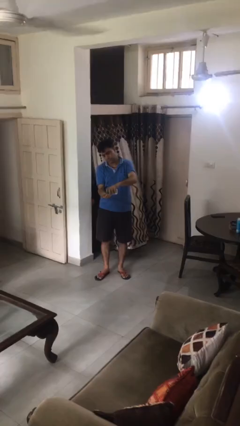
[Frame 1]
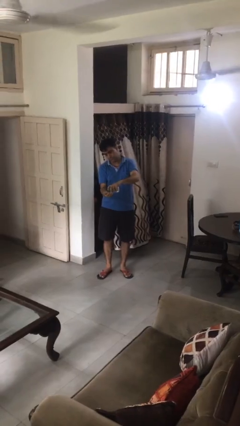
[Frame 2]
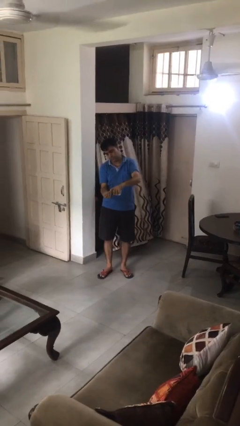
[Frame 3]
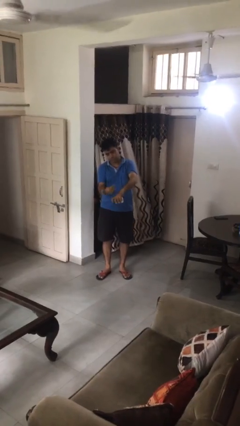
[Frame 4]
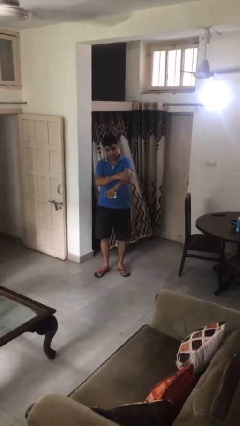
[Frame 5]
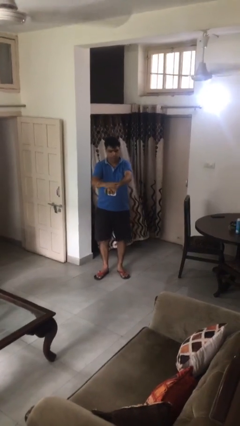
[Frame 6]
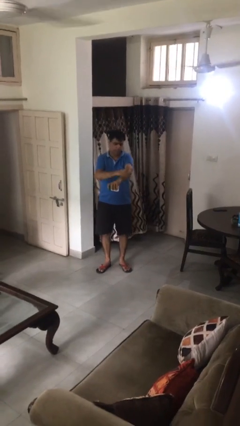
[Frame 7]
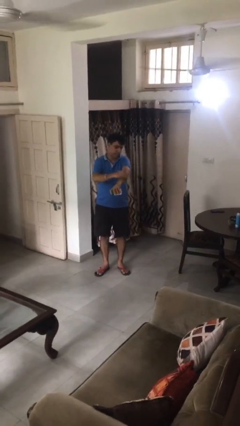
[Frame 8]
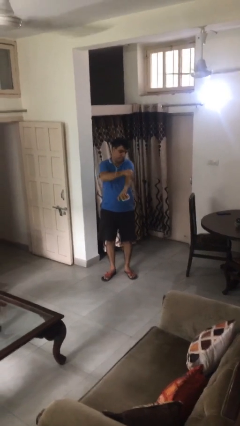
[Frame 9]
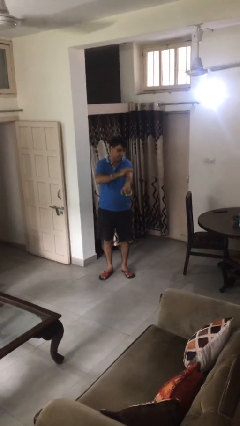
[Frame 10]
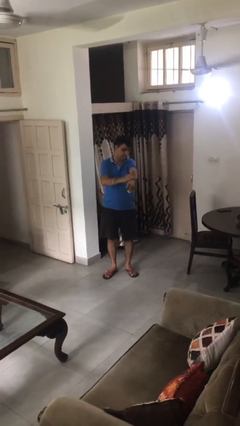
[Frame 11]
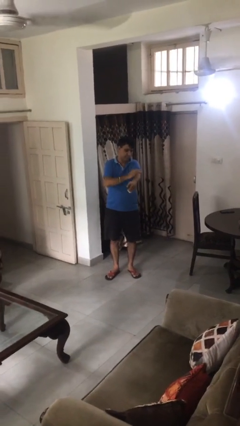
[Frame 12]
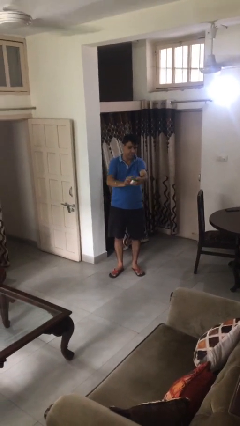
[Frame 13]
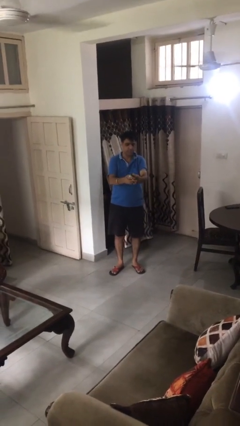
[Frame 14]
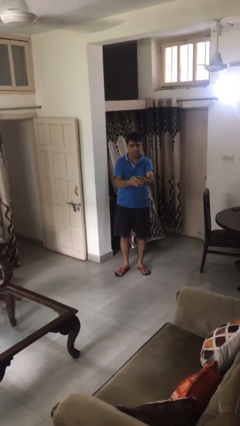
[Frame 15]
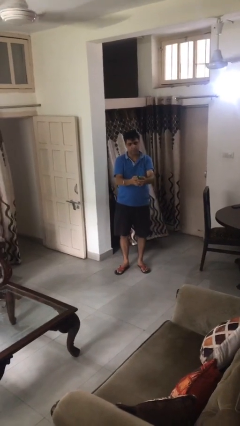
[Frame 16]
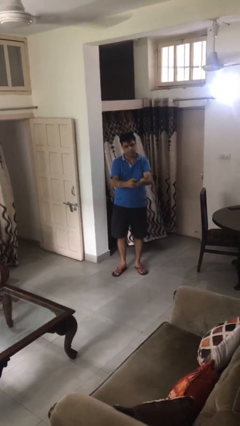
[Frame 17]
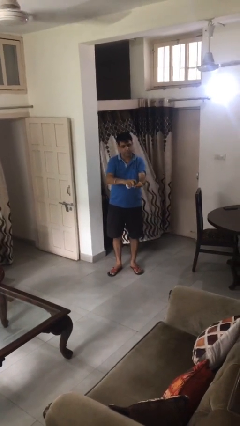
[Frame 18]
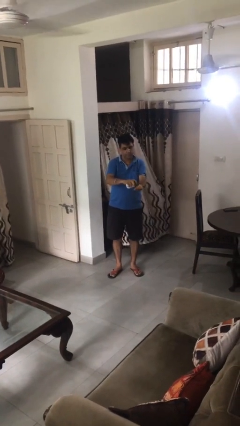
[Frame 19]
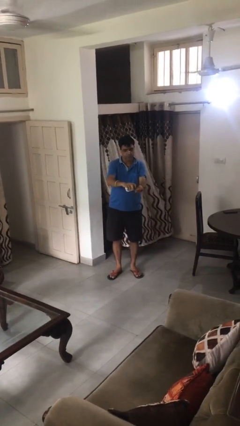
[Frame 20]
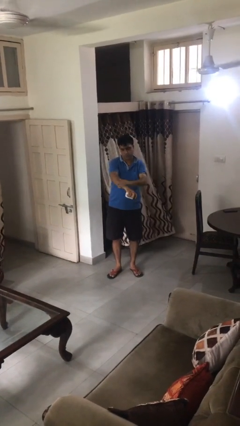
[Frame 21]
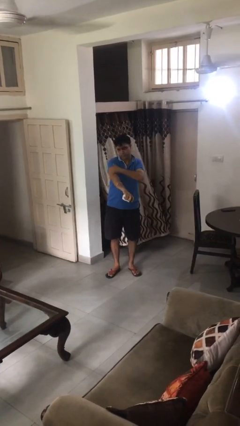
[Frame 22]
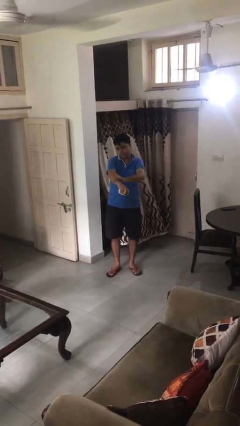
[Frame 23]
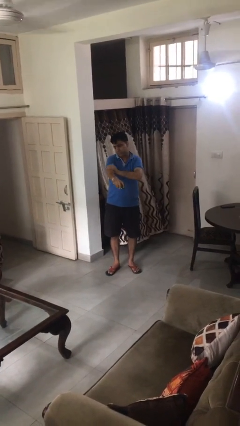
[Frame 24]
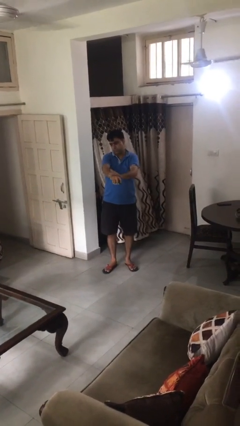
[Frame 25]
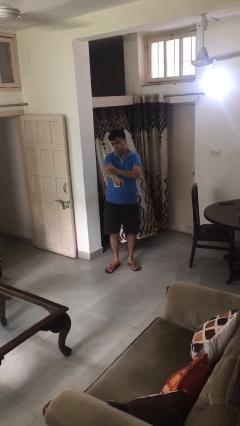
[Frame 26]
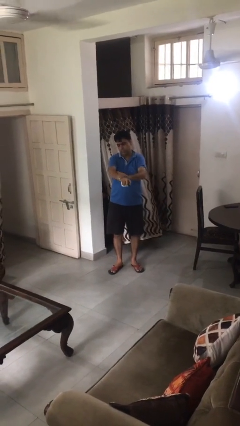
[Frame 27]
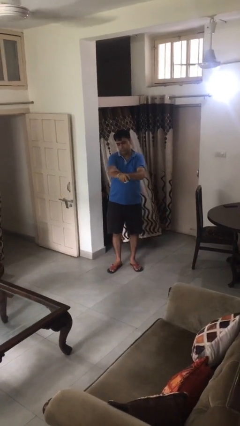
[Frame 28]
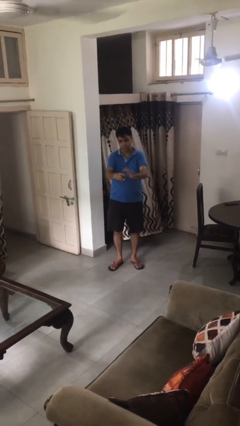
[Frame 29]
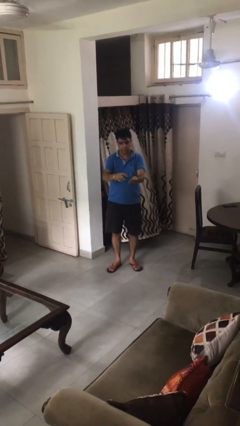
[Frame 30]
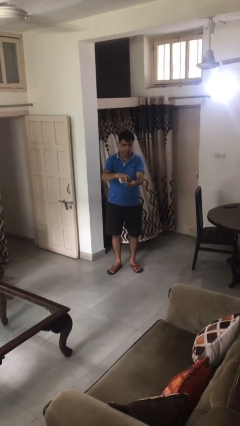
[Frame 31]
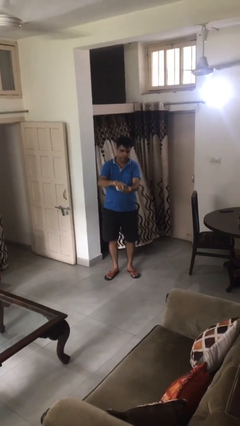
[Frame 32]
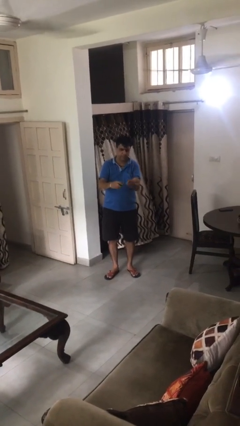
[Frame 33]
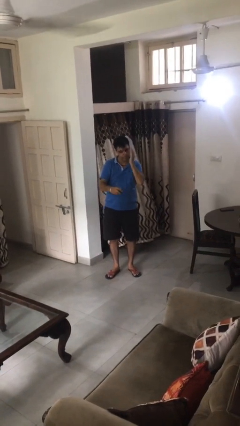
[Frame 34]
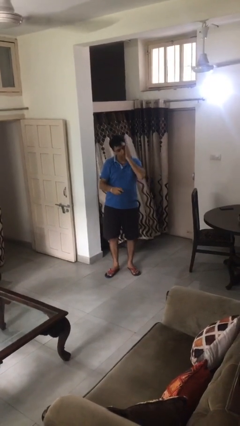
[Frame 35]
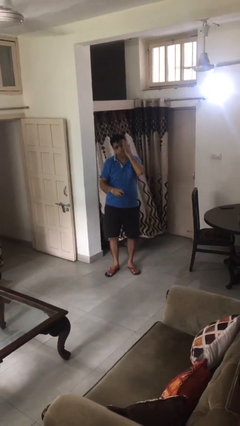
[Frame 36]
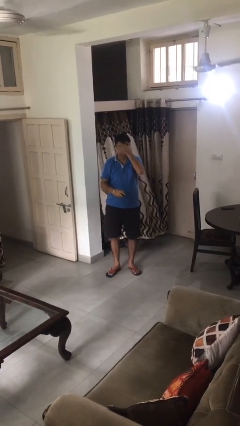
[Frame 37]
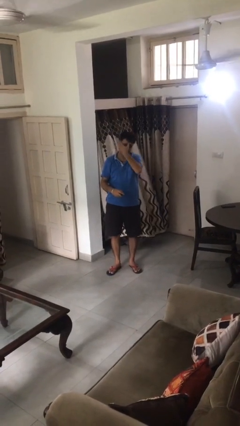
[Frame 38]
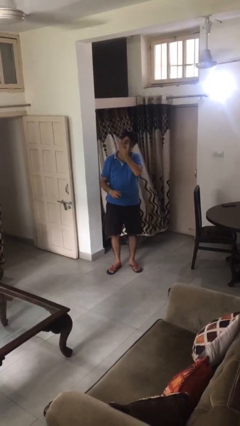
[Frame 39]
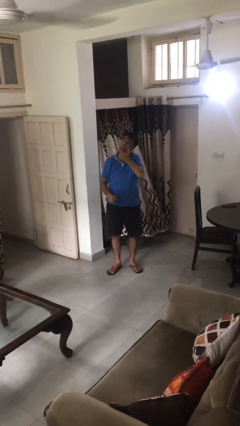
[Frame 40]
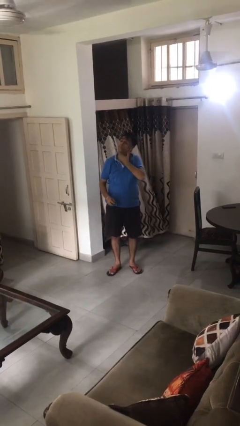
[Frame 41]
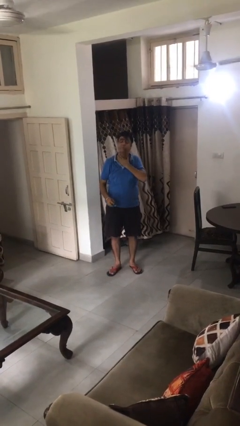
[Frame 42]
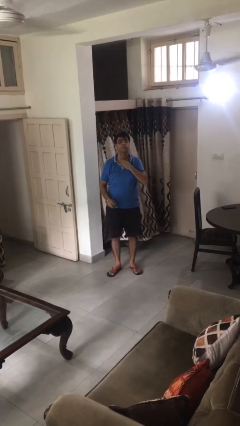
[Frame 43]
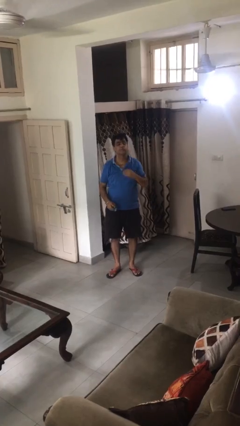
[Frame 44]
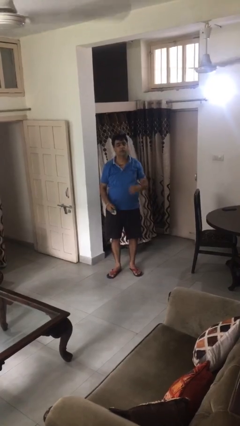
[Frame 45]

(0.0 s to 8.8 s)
person applies sunscreen

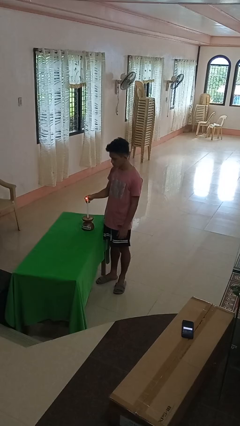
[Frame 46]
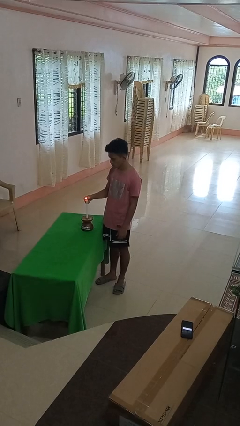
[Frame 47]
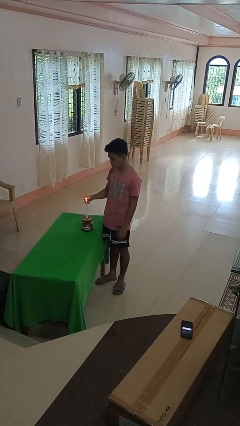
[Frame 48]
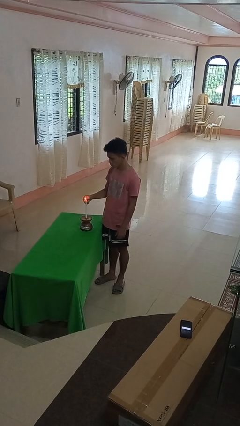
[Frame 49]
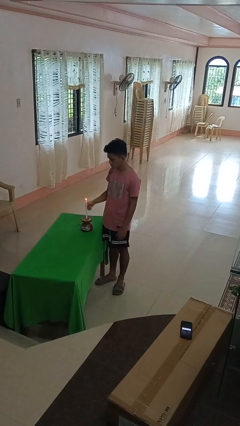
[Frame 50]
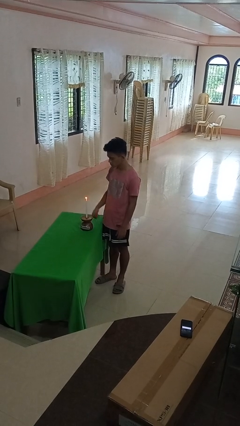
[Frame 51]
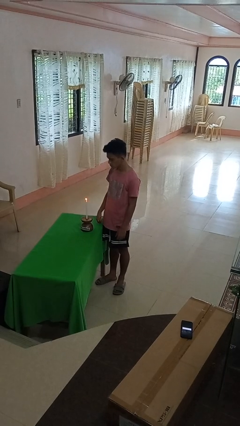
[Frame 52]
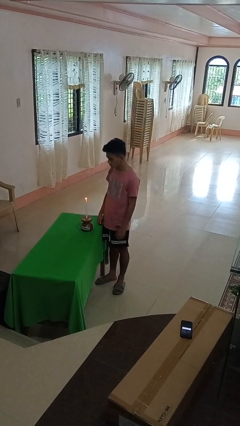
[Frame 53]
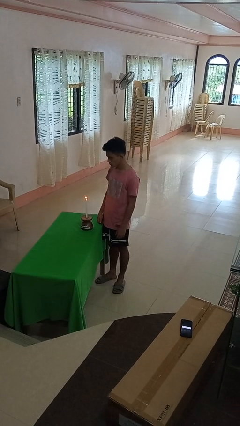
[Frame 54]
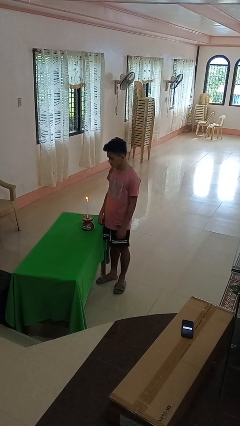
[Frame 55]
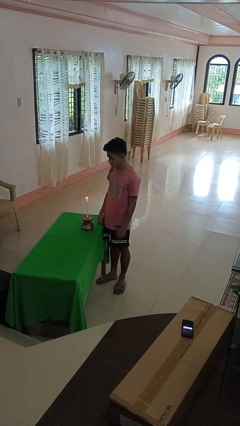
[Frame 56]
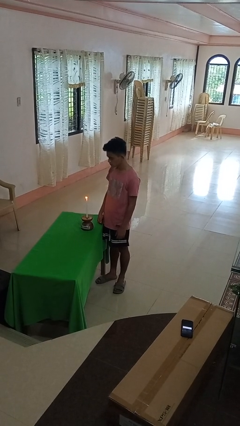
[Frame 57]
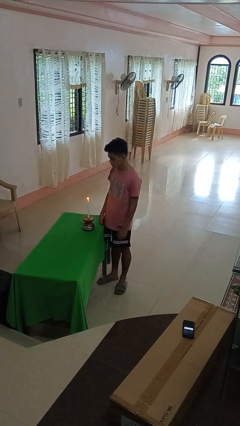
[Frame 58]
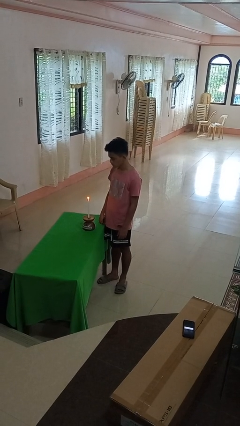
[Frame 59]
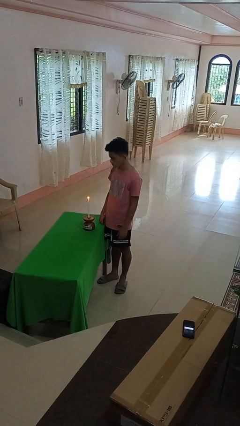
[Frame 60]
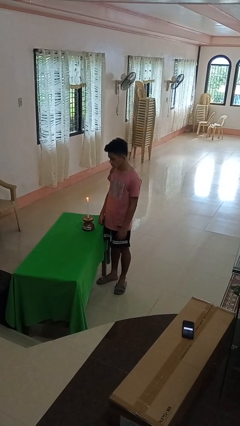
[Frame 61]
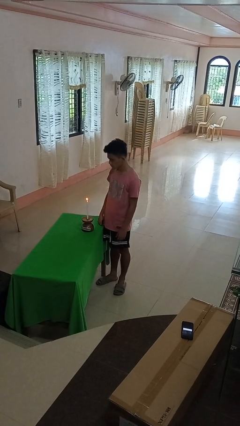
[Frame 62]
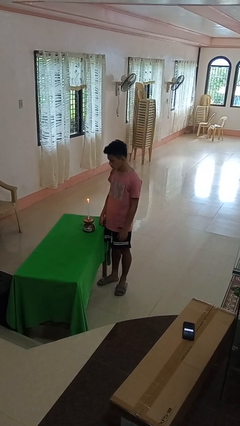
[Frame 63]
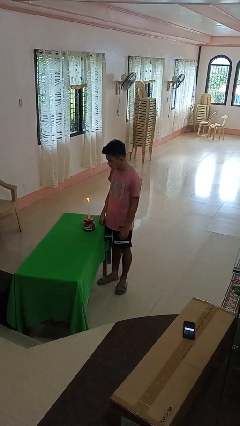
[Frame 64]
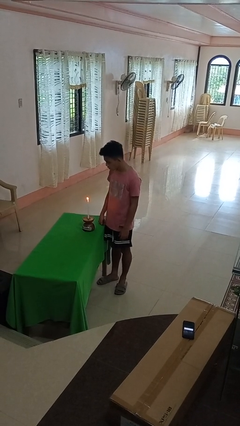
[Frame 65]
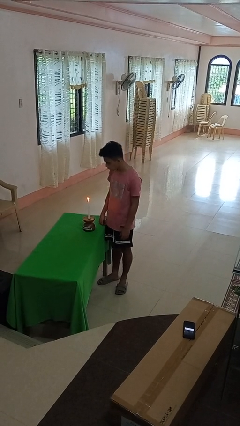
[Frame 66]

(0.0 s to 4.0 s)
person lights candle

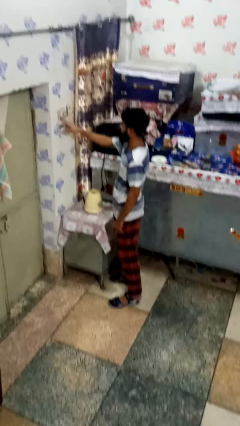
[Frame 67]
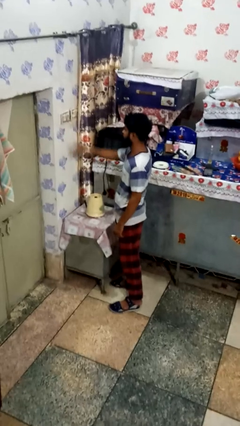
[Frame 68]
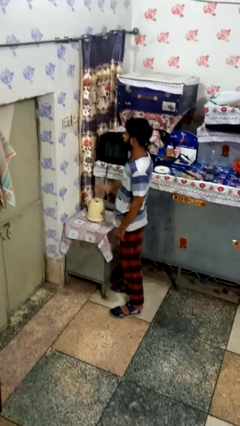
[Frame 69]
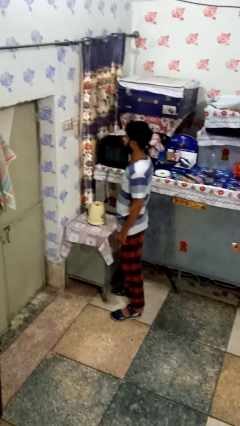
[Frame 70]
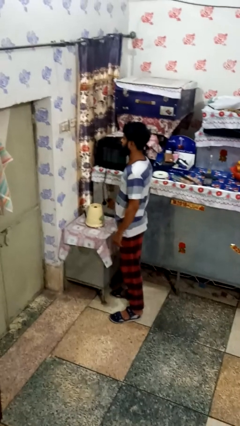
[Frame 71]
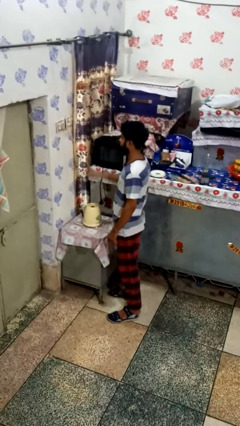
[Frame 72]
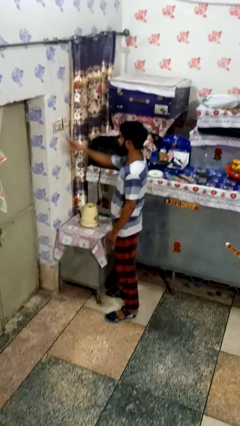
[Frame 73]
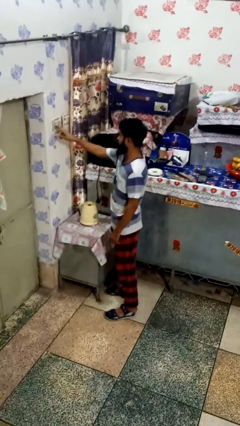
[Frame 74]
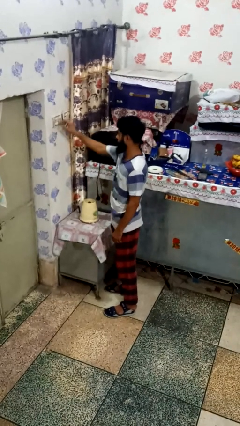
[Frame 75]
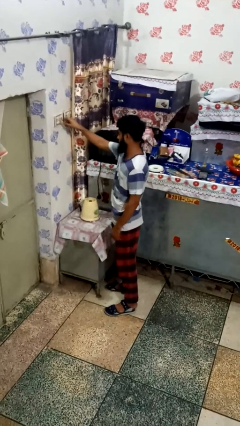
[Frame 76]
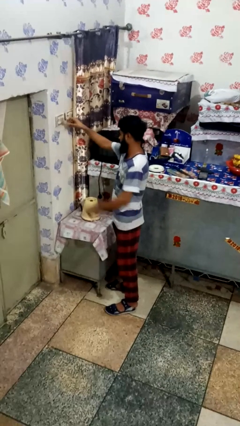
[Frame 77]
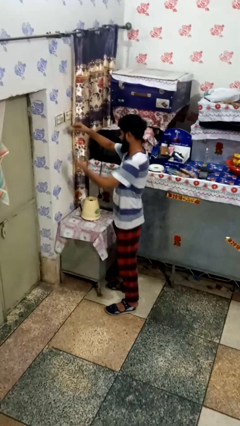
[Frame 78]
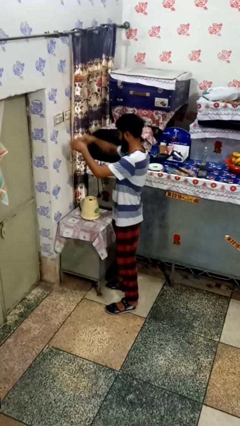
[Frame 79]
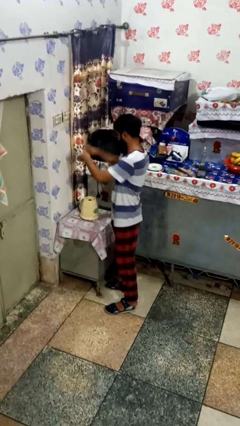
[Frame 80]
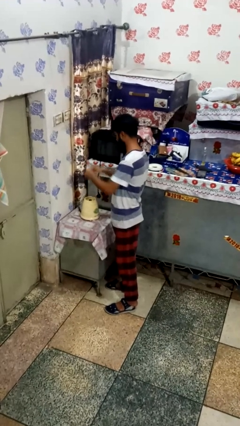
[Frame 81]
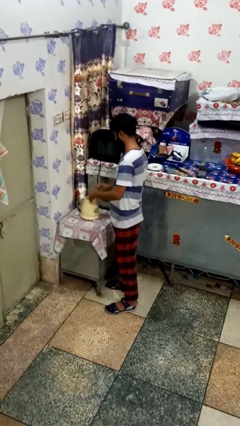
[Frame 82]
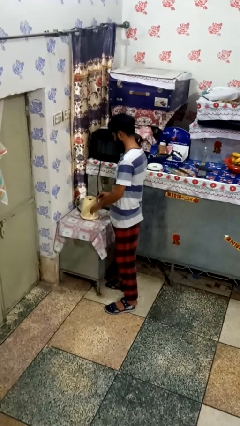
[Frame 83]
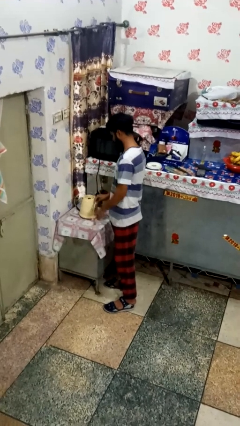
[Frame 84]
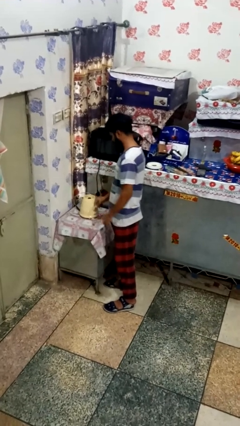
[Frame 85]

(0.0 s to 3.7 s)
person unplugs from electrical socket

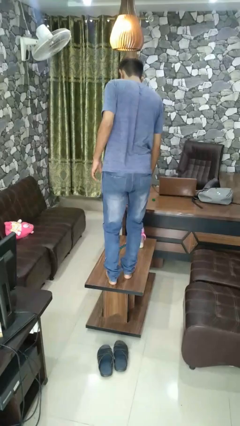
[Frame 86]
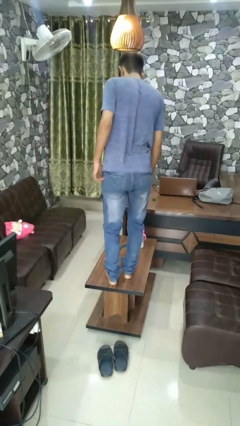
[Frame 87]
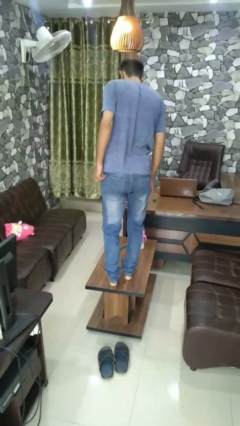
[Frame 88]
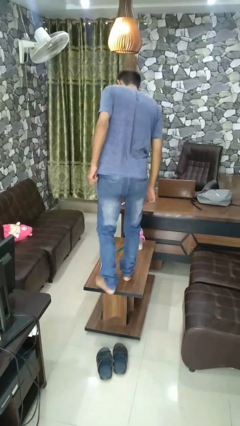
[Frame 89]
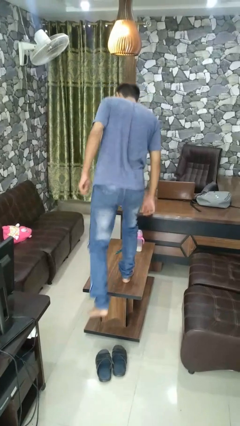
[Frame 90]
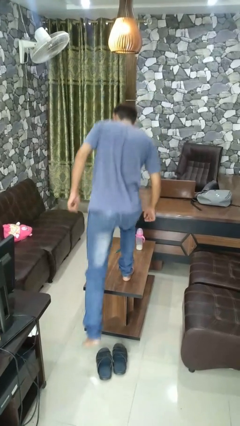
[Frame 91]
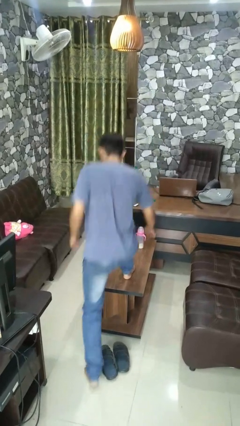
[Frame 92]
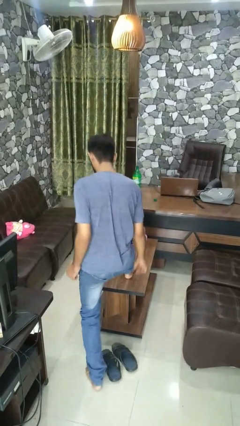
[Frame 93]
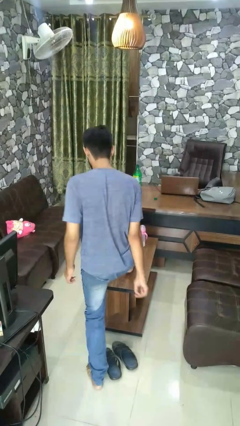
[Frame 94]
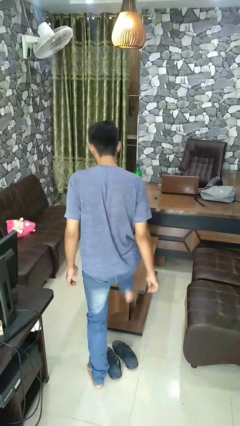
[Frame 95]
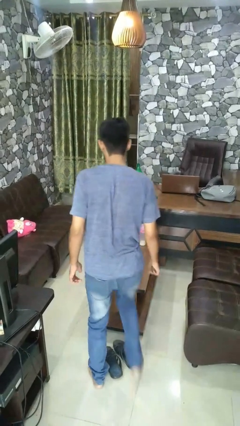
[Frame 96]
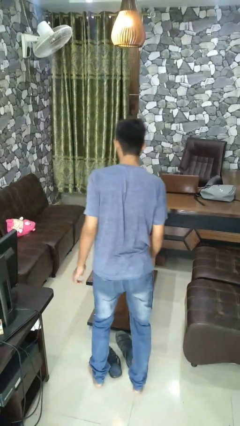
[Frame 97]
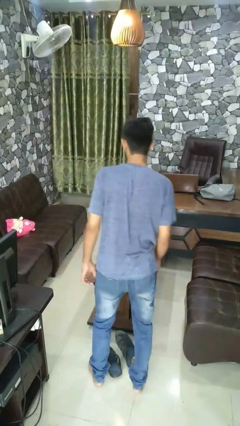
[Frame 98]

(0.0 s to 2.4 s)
person climbs off table
